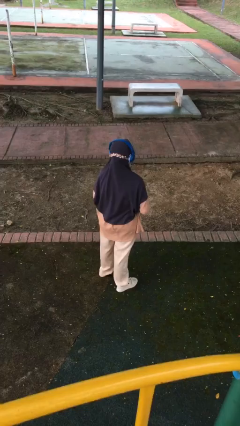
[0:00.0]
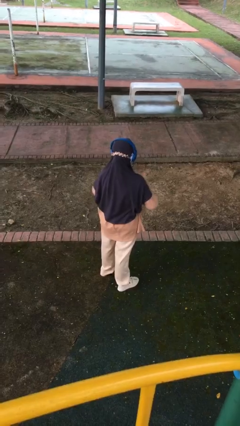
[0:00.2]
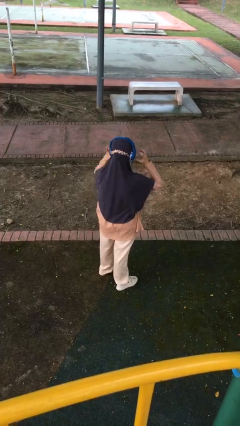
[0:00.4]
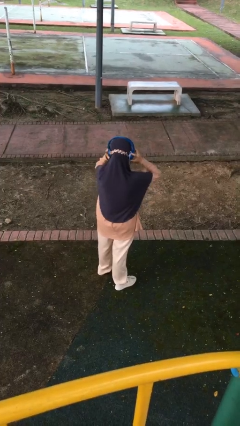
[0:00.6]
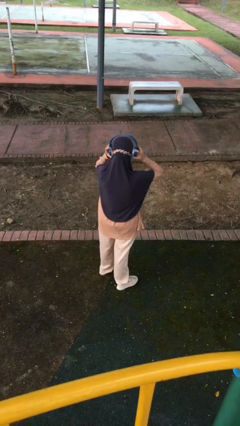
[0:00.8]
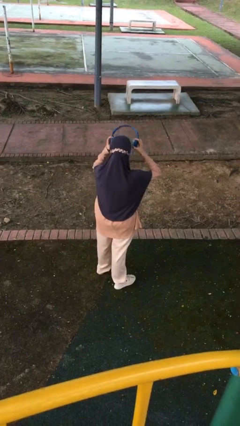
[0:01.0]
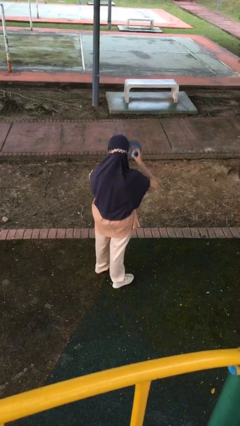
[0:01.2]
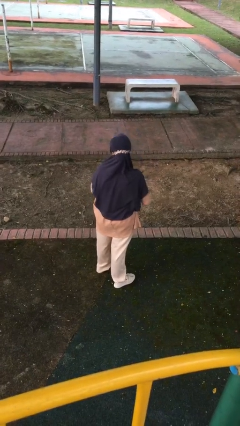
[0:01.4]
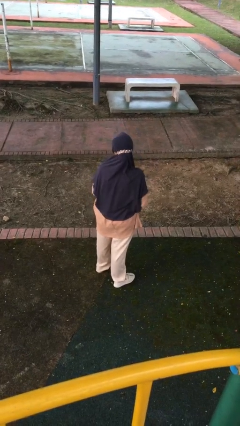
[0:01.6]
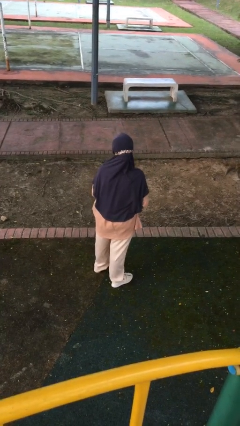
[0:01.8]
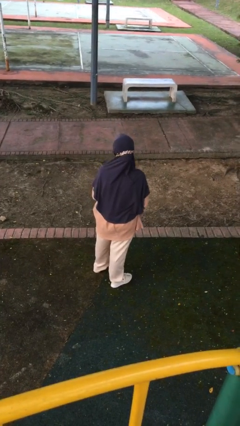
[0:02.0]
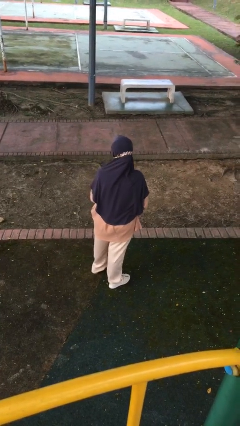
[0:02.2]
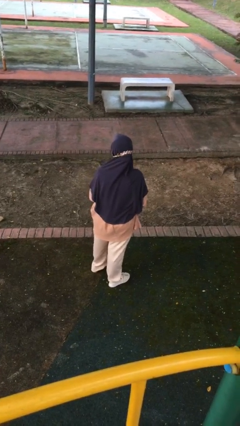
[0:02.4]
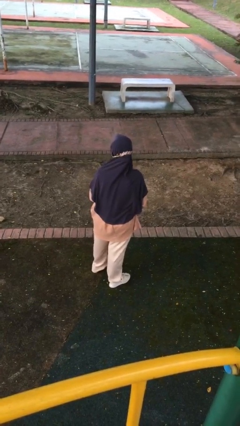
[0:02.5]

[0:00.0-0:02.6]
person takes off headphones

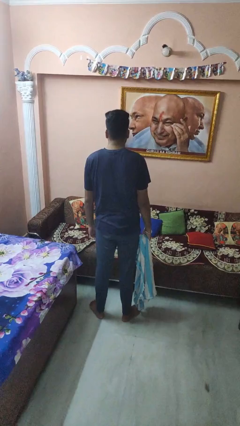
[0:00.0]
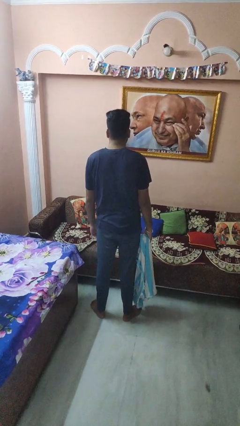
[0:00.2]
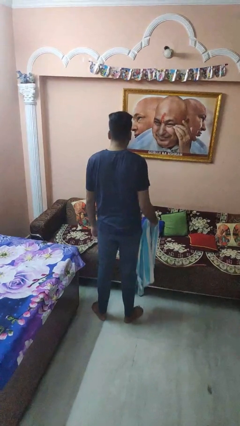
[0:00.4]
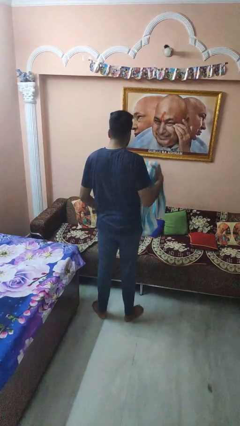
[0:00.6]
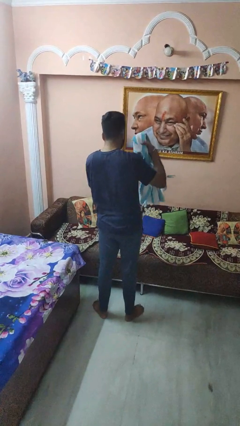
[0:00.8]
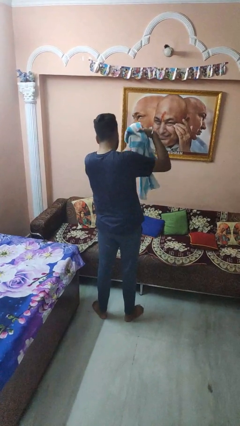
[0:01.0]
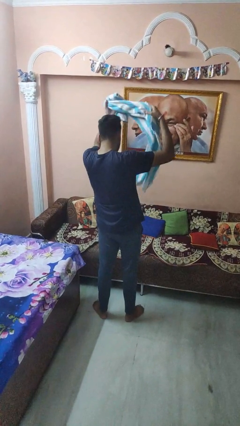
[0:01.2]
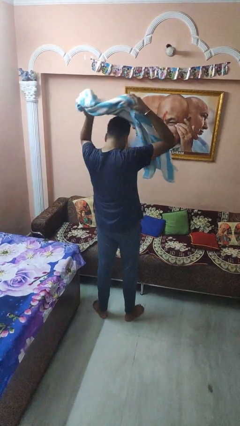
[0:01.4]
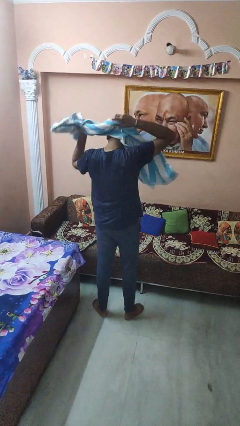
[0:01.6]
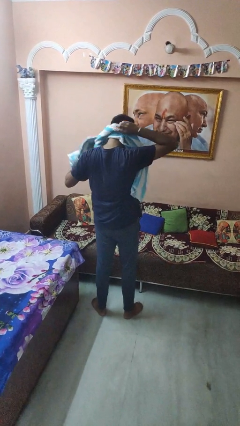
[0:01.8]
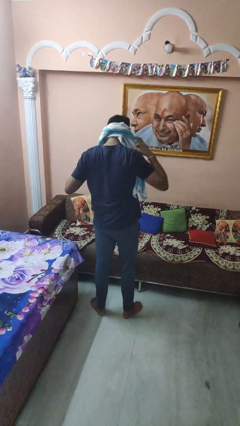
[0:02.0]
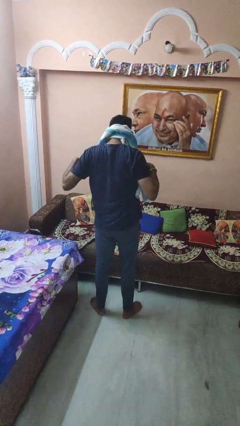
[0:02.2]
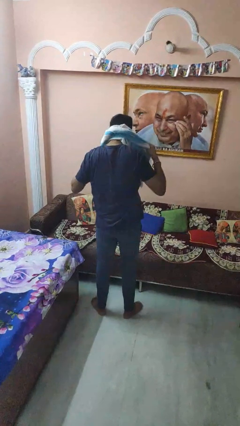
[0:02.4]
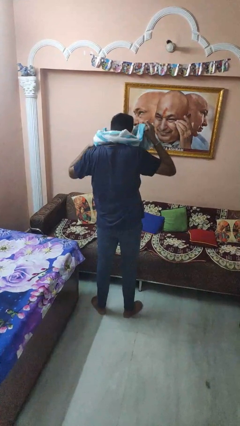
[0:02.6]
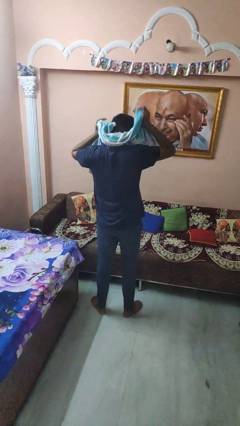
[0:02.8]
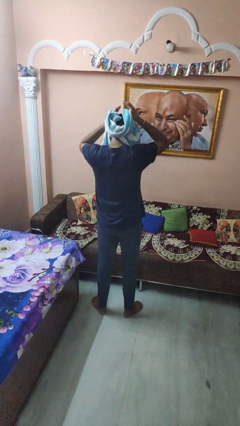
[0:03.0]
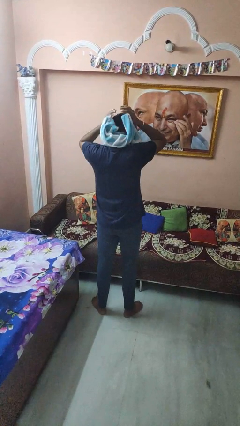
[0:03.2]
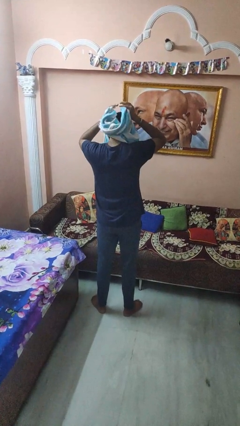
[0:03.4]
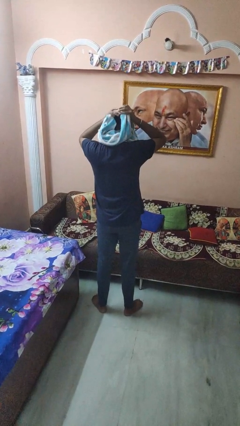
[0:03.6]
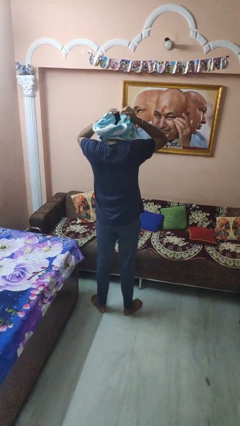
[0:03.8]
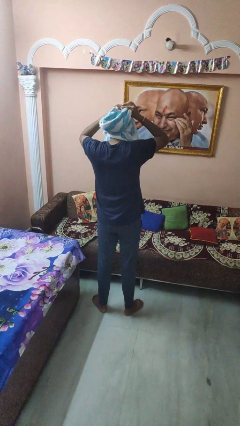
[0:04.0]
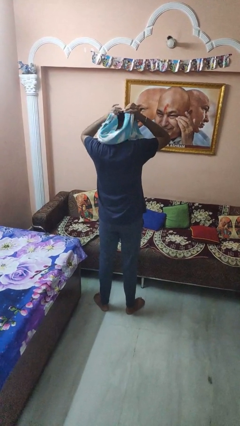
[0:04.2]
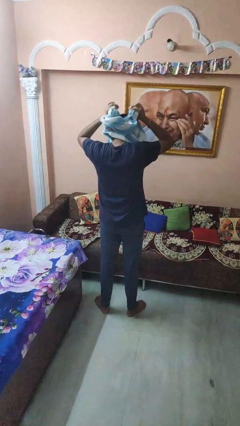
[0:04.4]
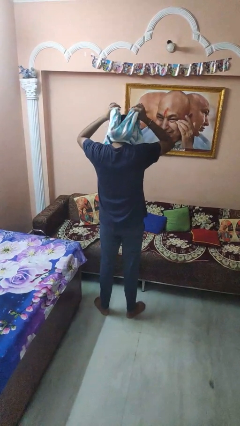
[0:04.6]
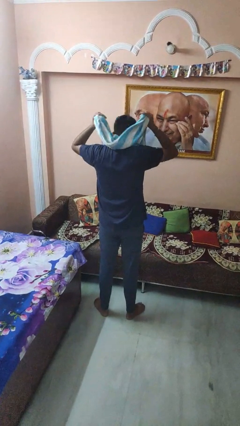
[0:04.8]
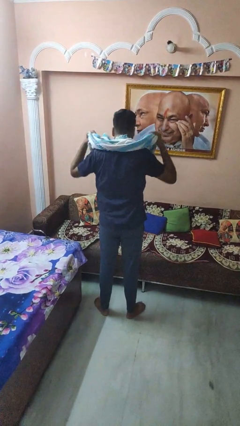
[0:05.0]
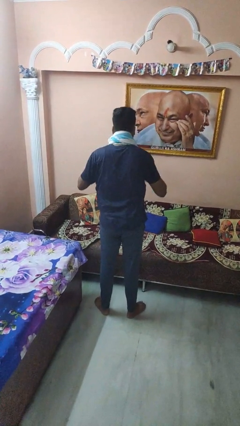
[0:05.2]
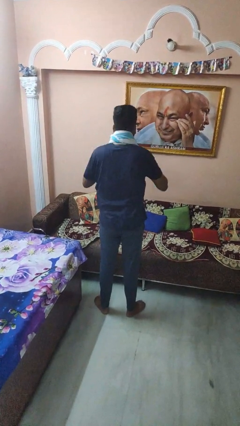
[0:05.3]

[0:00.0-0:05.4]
person dries hair with towel

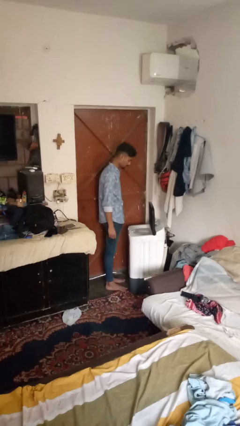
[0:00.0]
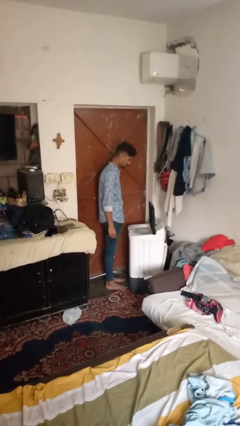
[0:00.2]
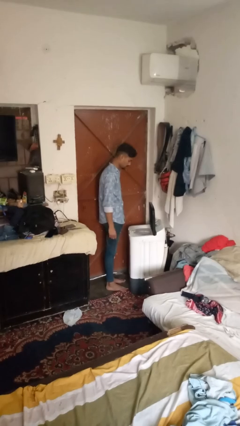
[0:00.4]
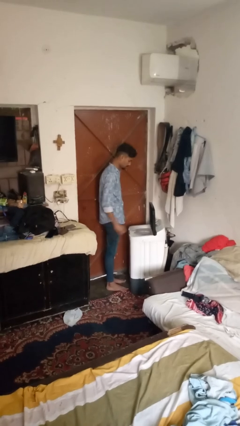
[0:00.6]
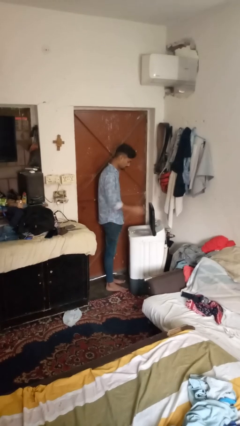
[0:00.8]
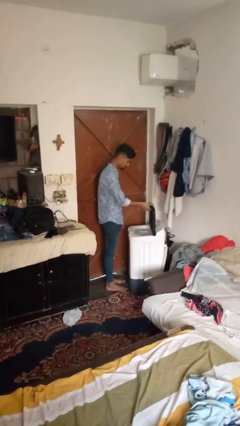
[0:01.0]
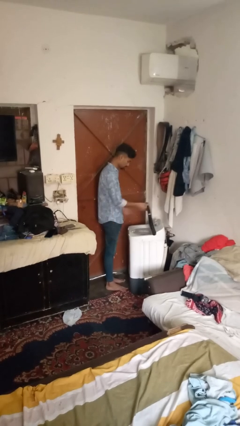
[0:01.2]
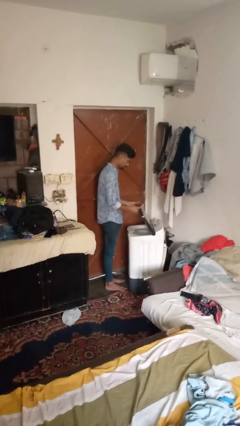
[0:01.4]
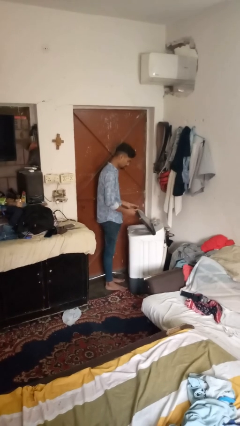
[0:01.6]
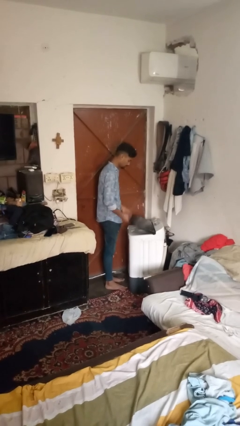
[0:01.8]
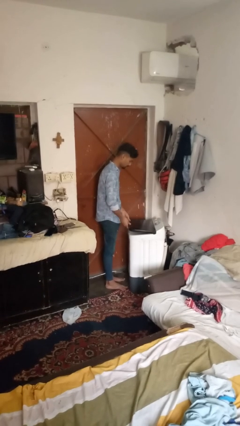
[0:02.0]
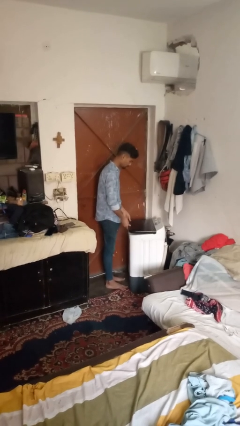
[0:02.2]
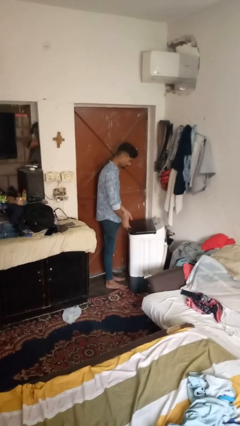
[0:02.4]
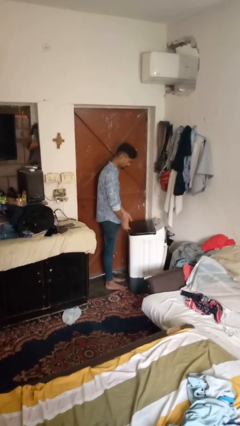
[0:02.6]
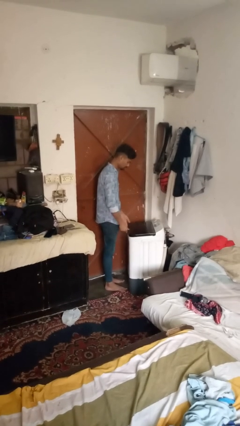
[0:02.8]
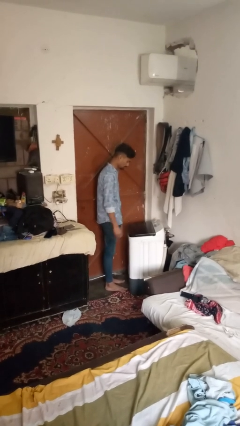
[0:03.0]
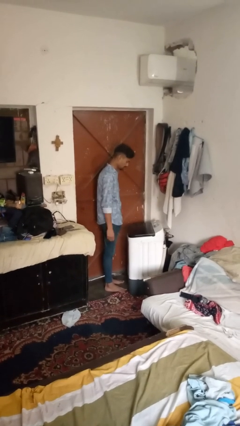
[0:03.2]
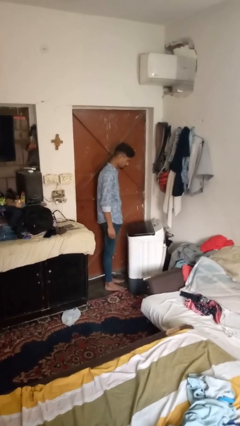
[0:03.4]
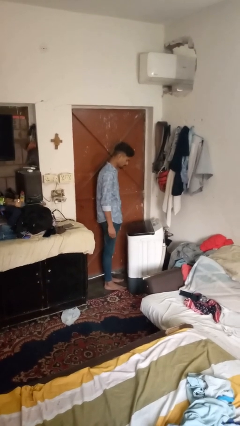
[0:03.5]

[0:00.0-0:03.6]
person closes clothes washer

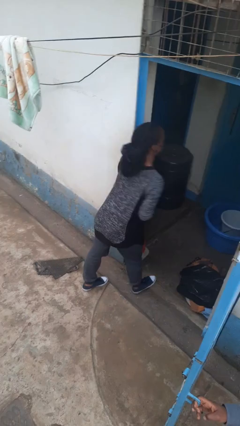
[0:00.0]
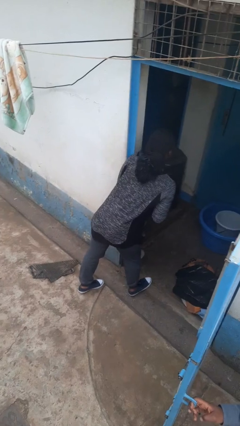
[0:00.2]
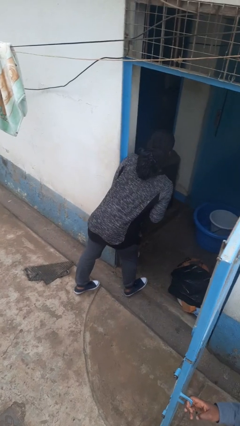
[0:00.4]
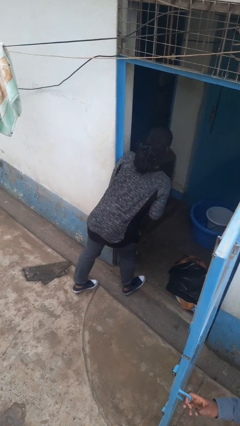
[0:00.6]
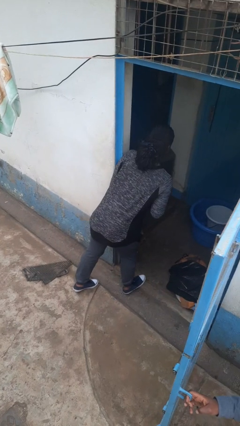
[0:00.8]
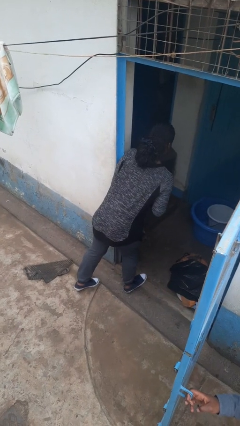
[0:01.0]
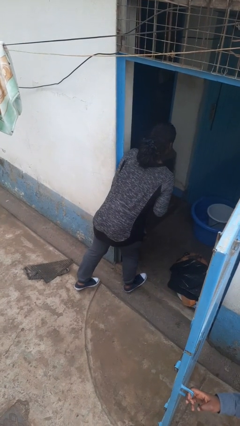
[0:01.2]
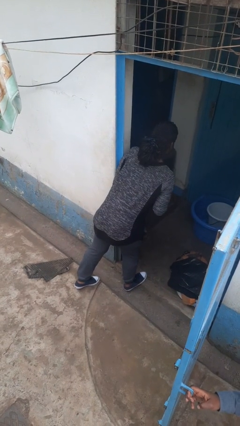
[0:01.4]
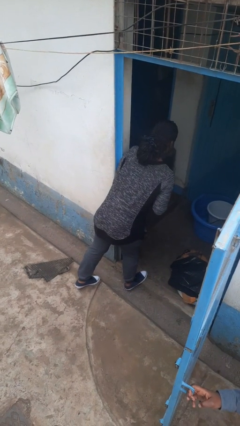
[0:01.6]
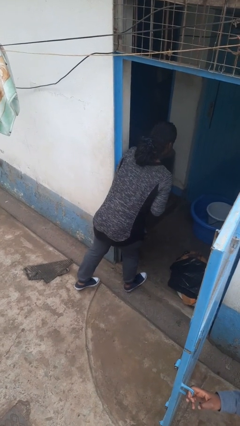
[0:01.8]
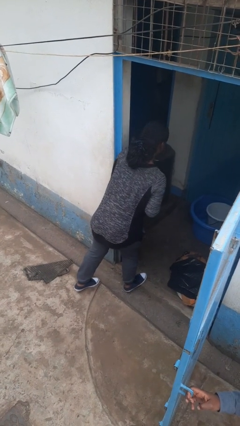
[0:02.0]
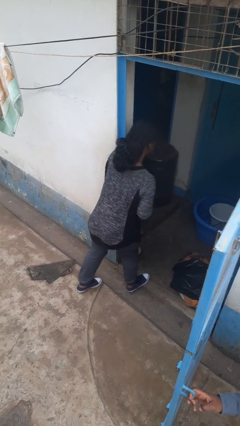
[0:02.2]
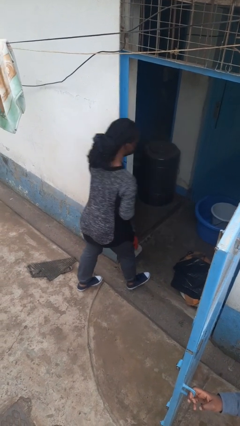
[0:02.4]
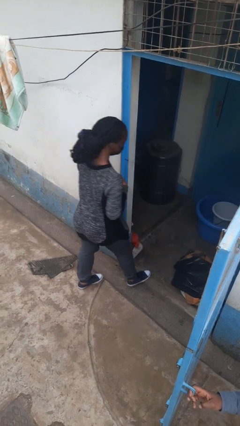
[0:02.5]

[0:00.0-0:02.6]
person bumps into wall

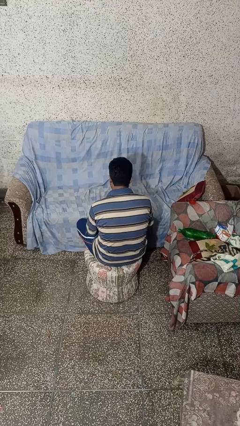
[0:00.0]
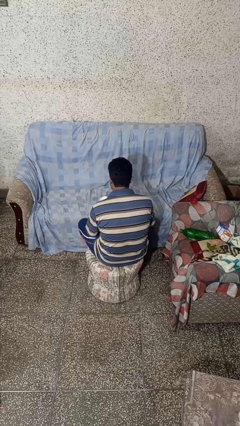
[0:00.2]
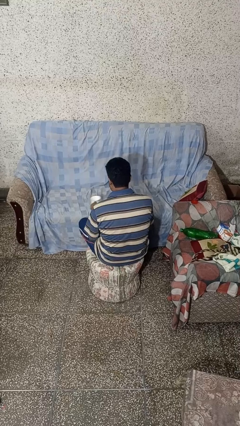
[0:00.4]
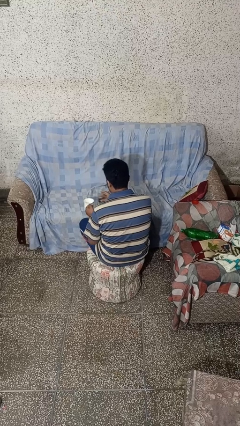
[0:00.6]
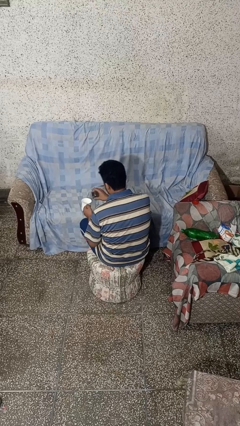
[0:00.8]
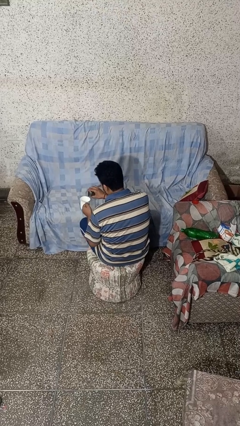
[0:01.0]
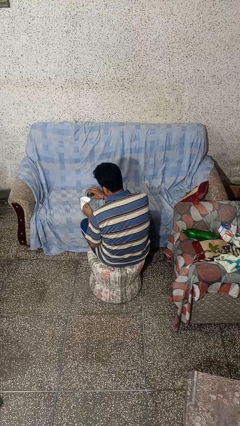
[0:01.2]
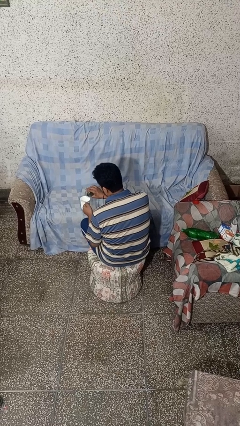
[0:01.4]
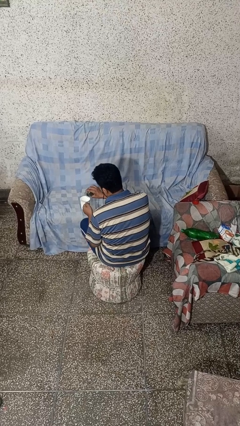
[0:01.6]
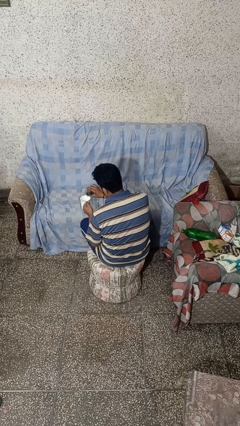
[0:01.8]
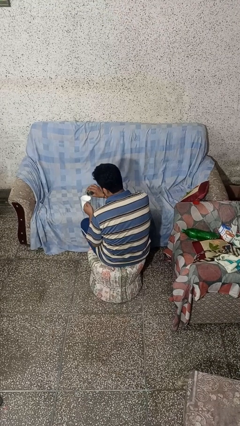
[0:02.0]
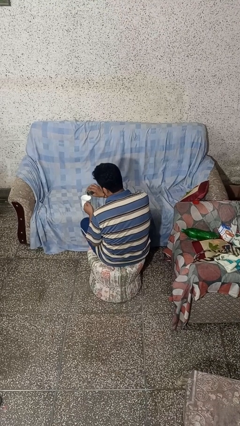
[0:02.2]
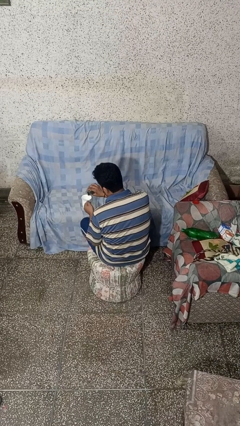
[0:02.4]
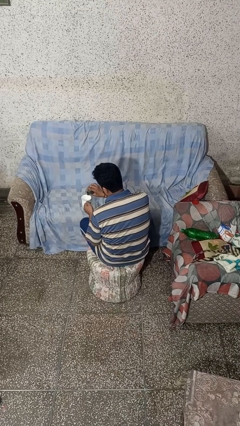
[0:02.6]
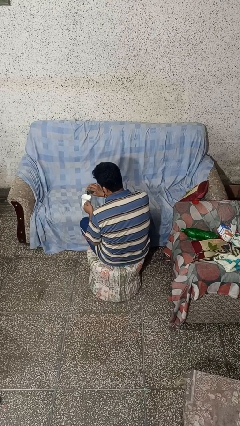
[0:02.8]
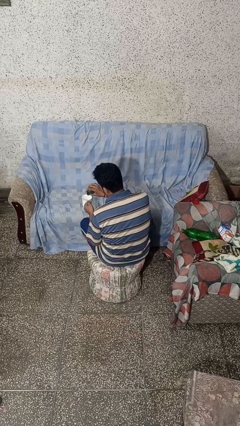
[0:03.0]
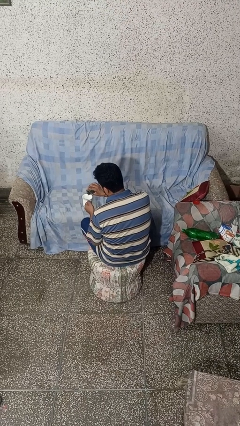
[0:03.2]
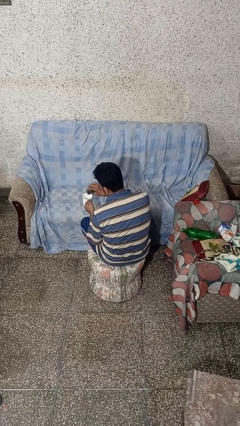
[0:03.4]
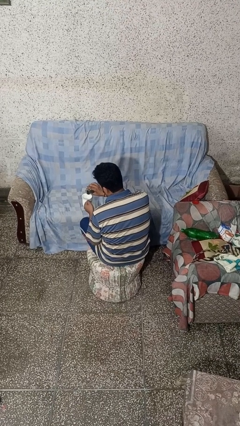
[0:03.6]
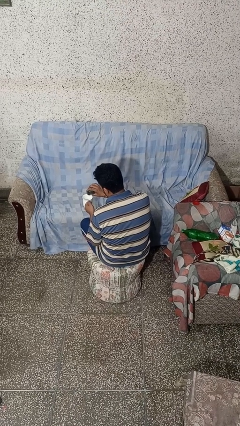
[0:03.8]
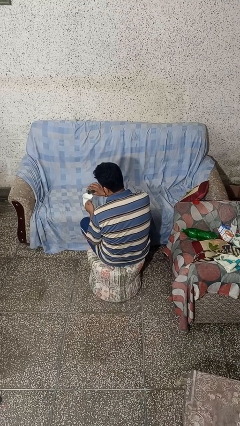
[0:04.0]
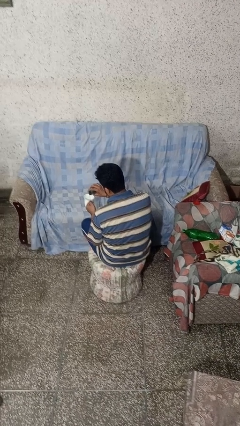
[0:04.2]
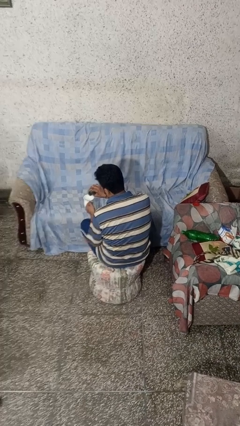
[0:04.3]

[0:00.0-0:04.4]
person pours coffee into mug
